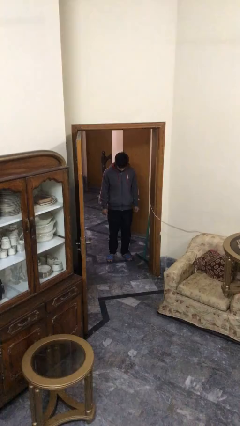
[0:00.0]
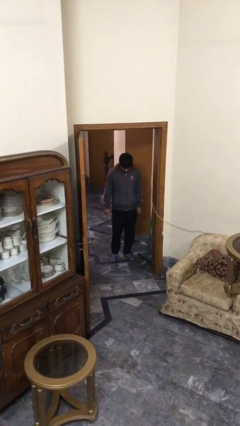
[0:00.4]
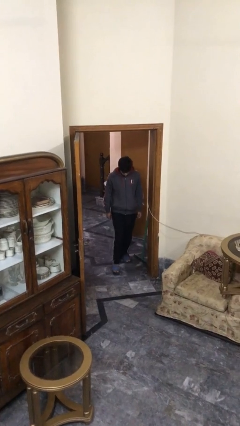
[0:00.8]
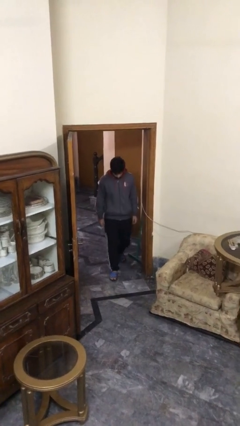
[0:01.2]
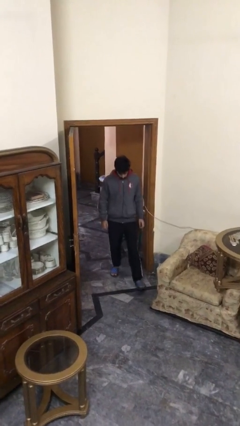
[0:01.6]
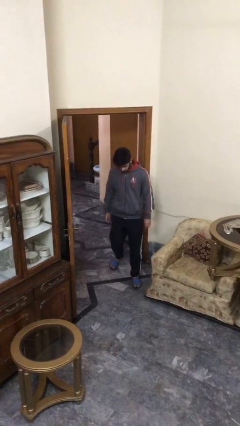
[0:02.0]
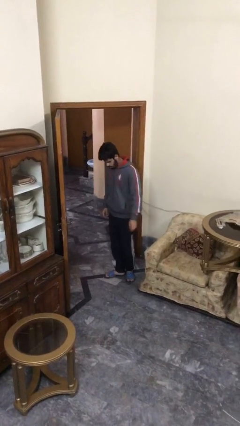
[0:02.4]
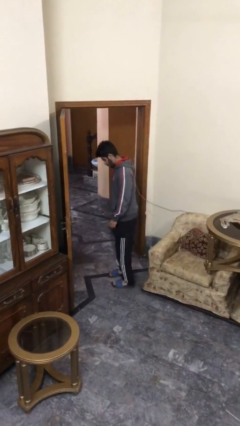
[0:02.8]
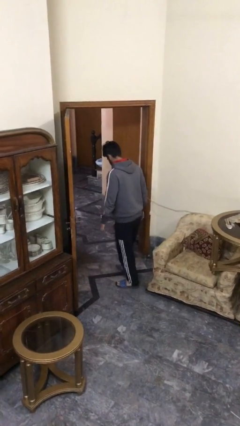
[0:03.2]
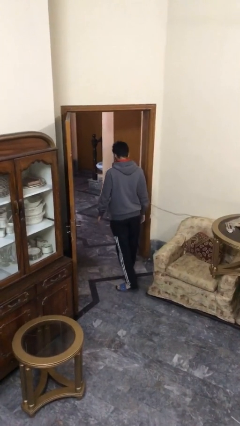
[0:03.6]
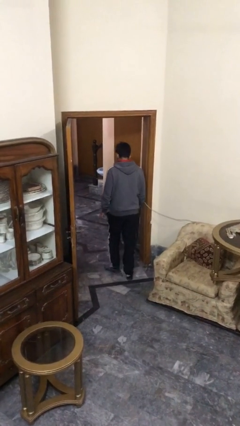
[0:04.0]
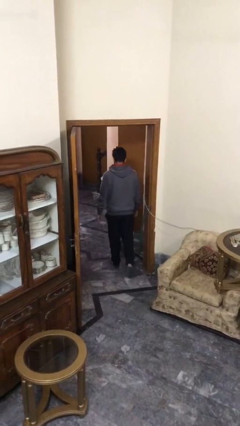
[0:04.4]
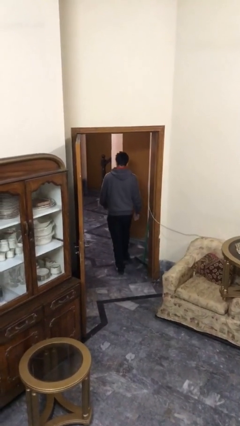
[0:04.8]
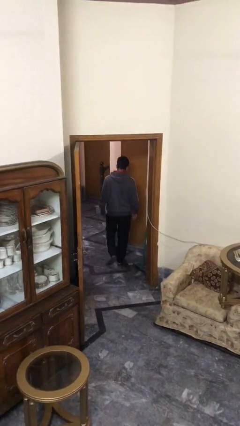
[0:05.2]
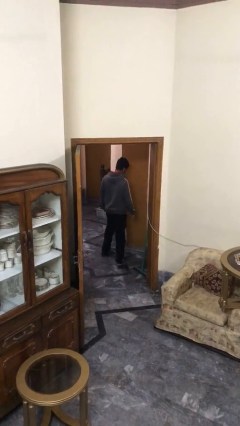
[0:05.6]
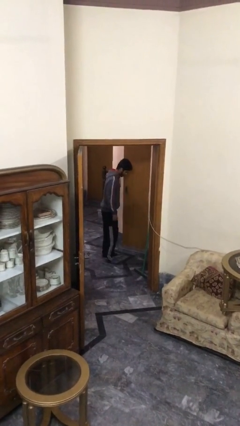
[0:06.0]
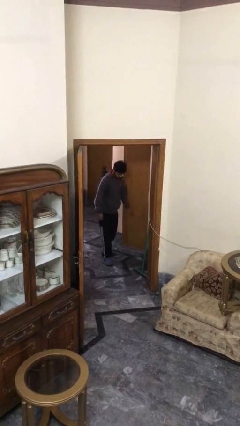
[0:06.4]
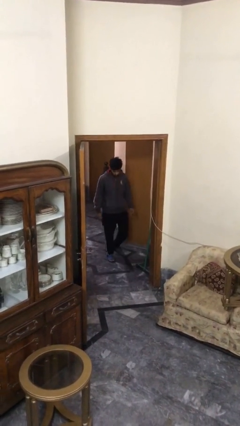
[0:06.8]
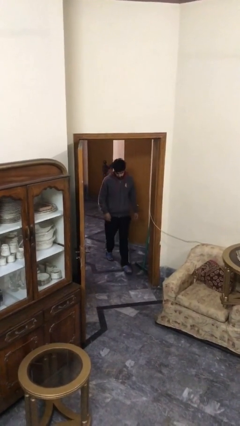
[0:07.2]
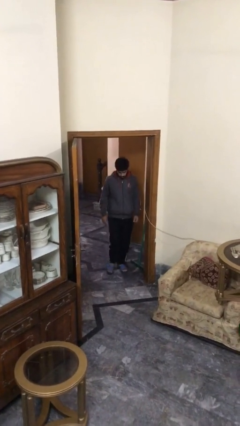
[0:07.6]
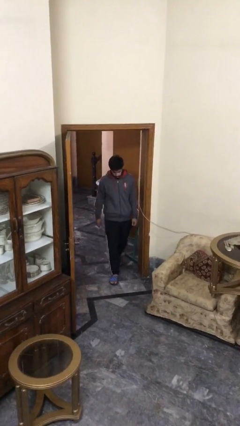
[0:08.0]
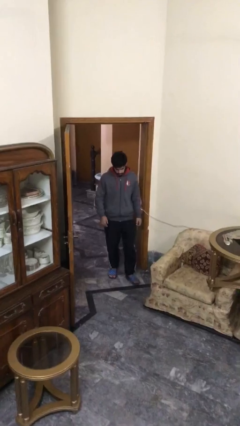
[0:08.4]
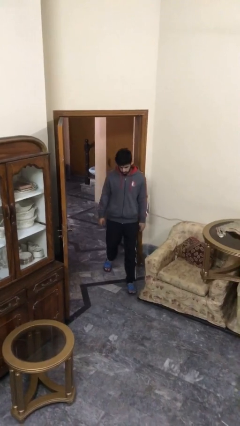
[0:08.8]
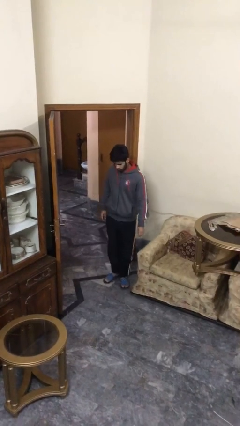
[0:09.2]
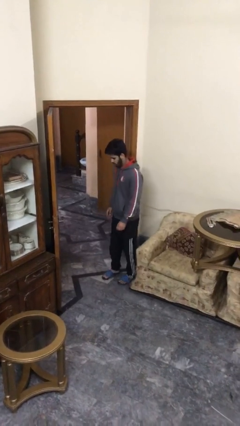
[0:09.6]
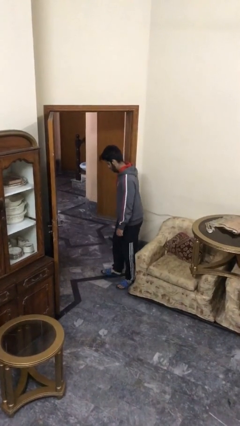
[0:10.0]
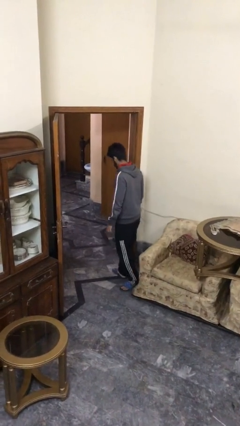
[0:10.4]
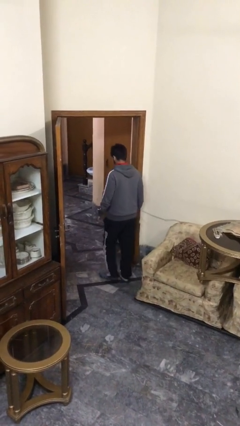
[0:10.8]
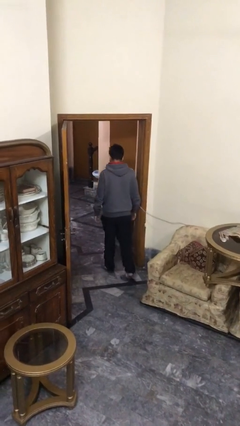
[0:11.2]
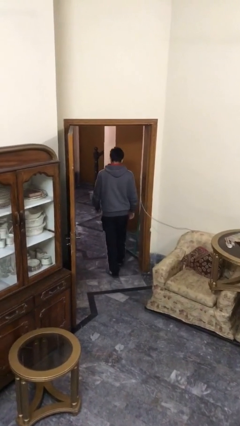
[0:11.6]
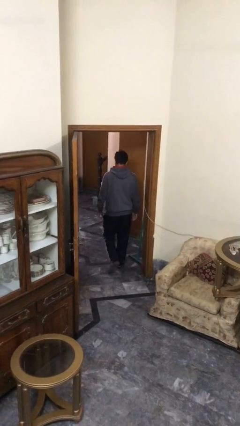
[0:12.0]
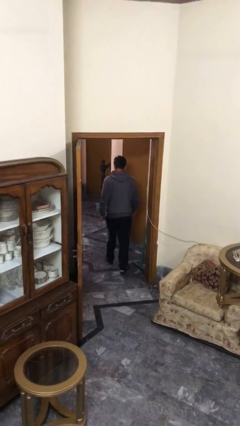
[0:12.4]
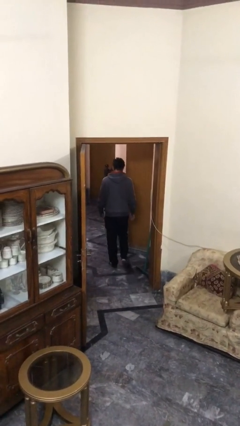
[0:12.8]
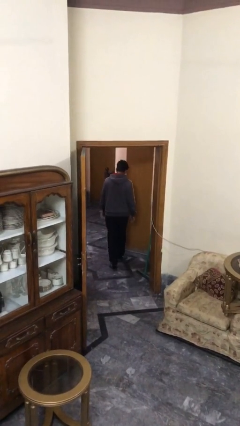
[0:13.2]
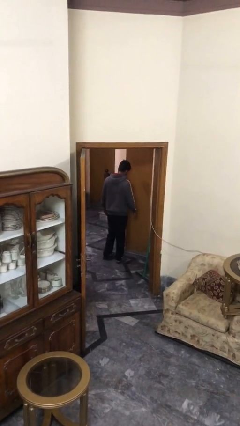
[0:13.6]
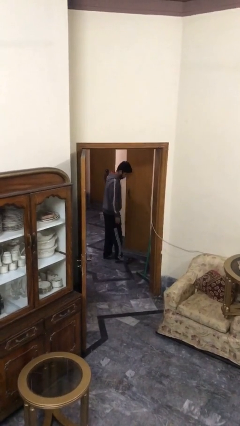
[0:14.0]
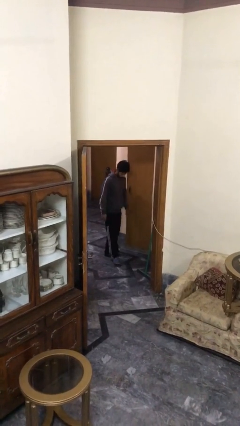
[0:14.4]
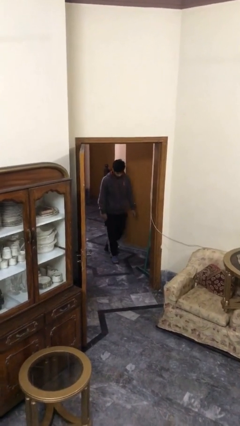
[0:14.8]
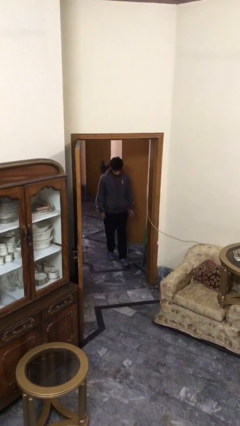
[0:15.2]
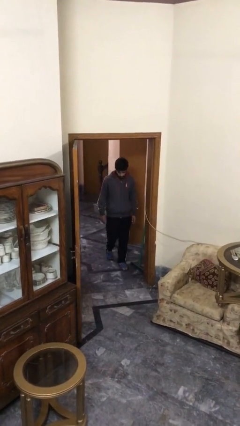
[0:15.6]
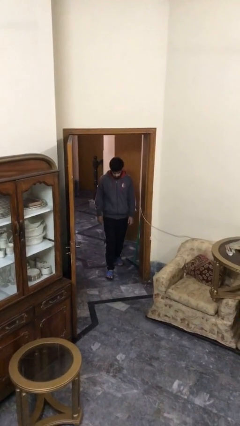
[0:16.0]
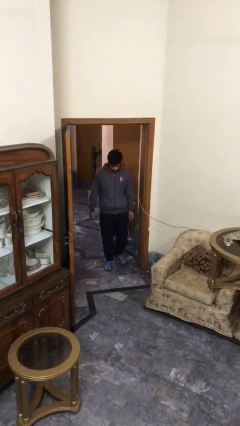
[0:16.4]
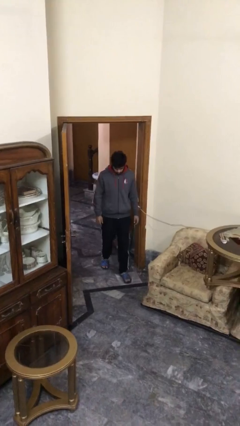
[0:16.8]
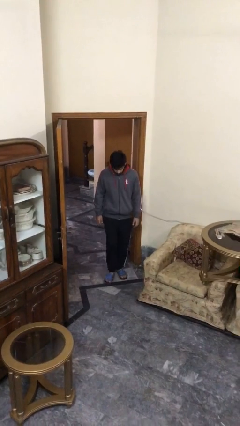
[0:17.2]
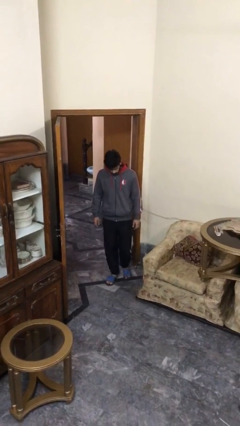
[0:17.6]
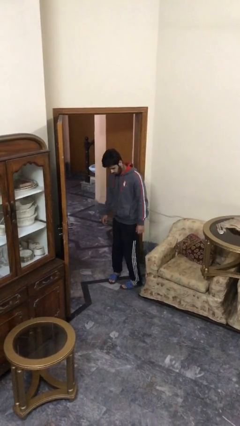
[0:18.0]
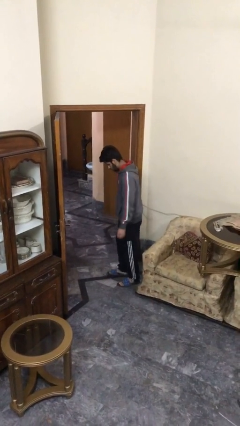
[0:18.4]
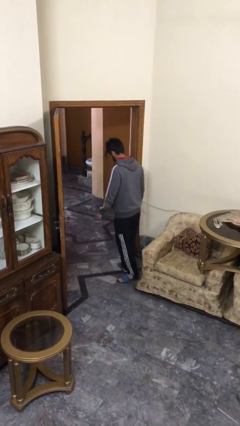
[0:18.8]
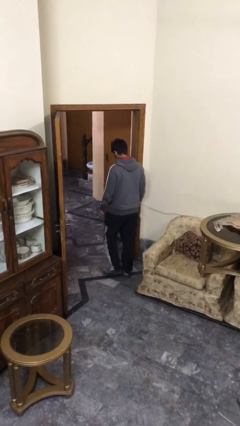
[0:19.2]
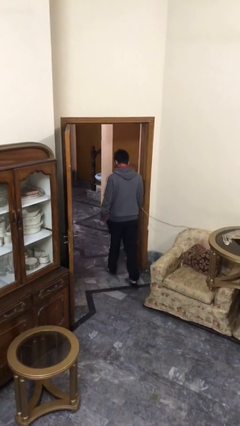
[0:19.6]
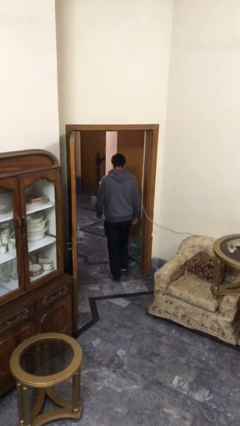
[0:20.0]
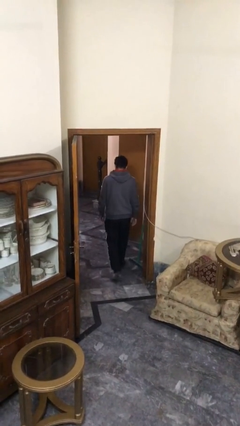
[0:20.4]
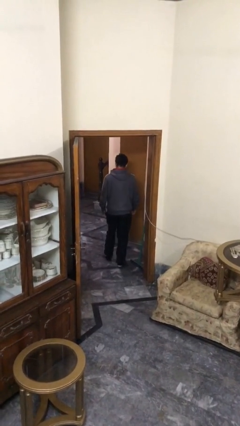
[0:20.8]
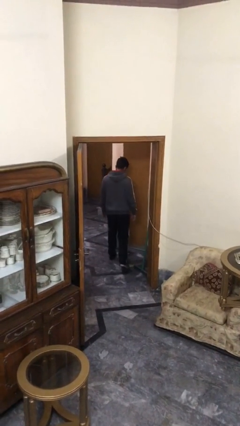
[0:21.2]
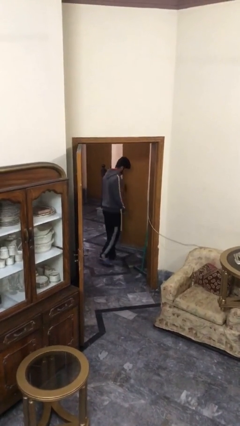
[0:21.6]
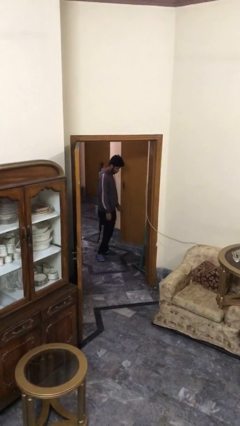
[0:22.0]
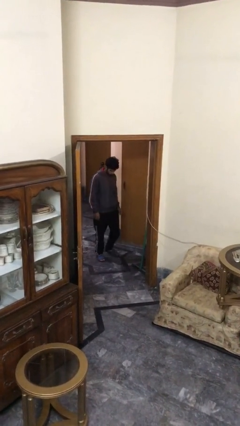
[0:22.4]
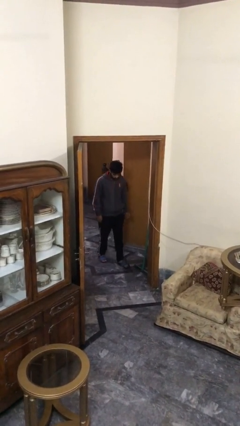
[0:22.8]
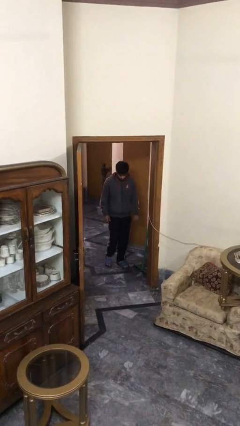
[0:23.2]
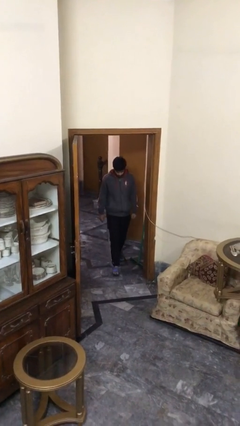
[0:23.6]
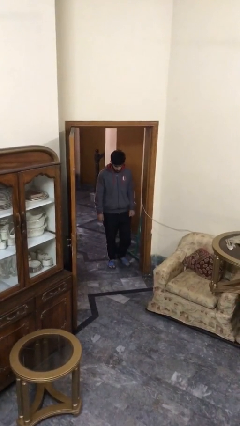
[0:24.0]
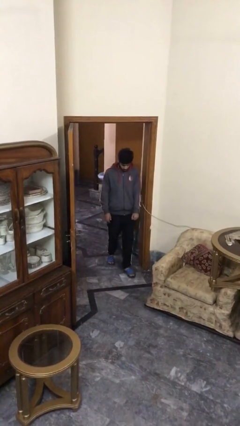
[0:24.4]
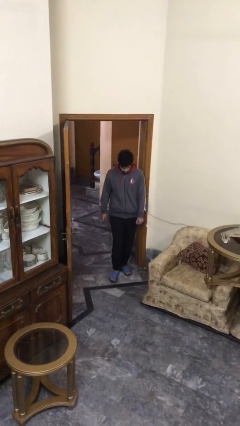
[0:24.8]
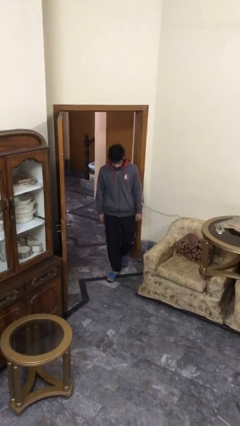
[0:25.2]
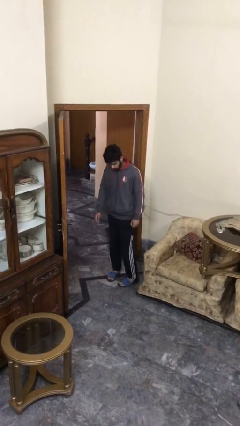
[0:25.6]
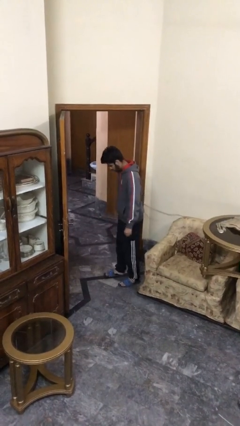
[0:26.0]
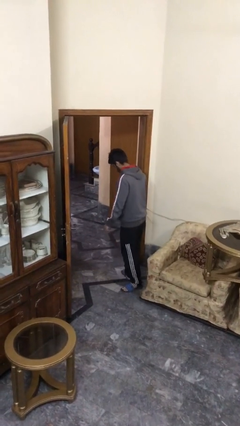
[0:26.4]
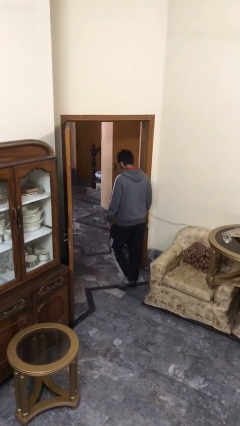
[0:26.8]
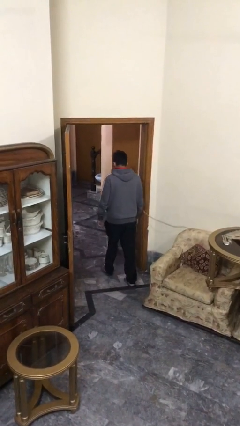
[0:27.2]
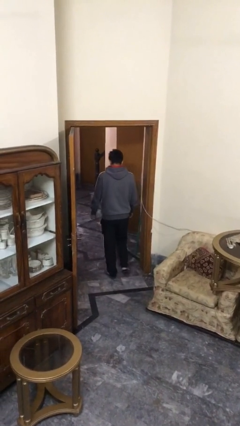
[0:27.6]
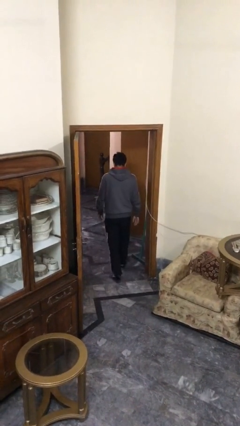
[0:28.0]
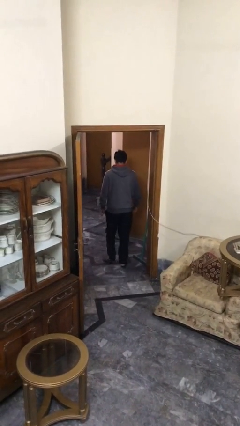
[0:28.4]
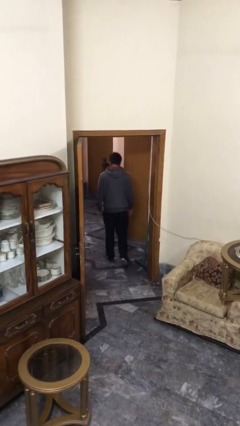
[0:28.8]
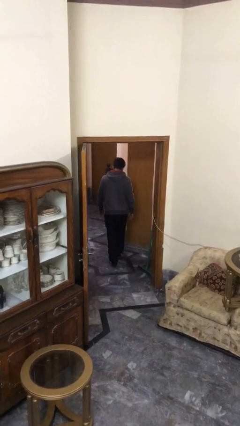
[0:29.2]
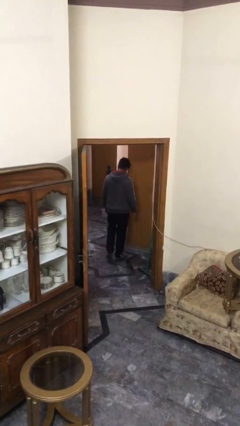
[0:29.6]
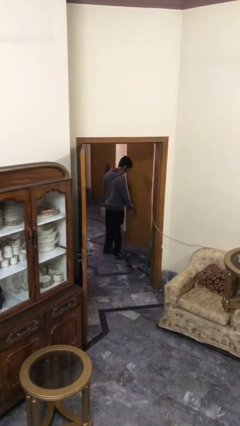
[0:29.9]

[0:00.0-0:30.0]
person walks

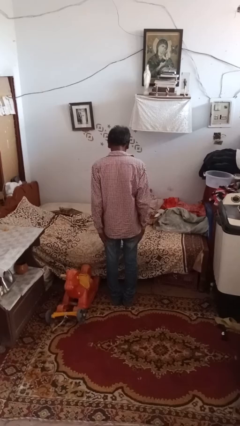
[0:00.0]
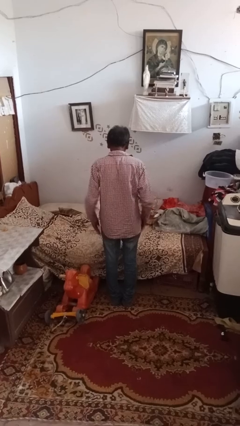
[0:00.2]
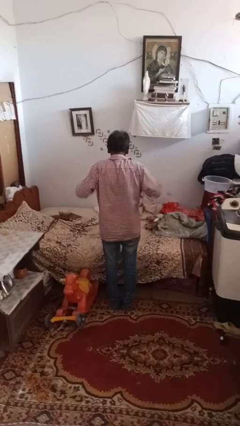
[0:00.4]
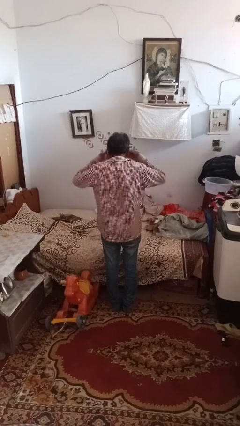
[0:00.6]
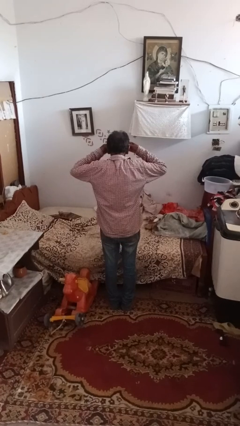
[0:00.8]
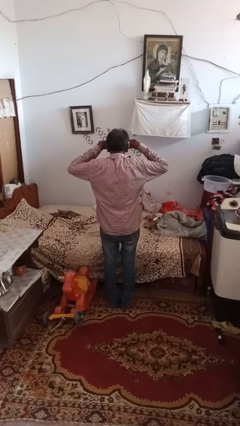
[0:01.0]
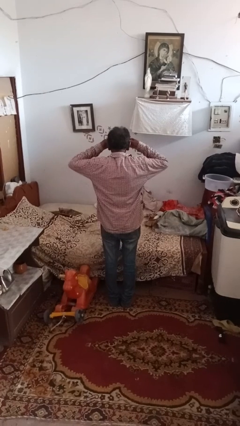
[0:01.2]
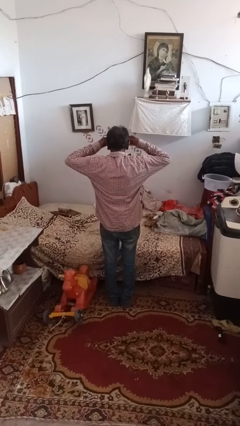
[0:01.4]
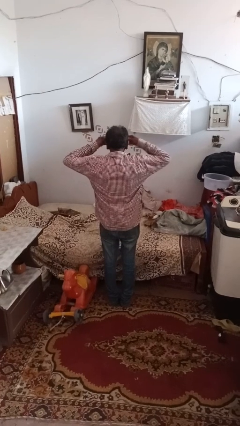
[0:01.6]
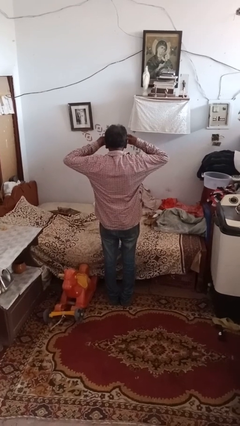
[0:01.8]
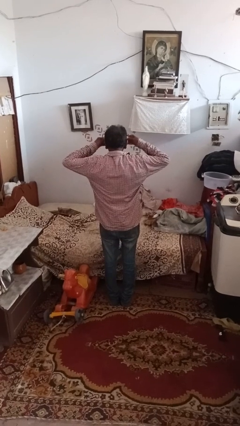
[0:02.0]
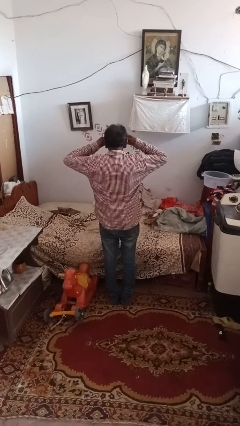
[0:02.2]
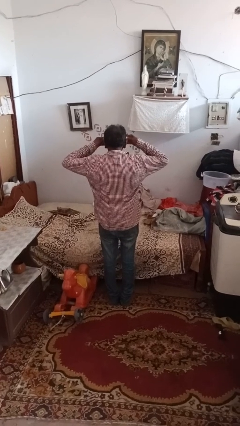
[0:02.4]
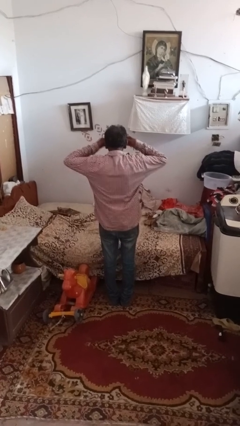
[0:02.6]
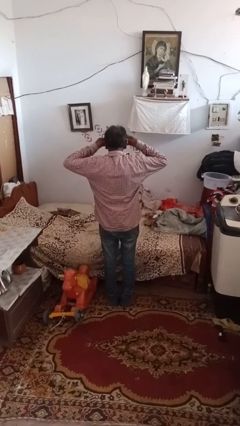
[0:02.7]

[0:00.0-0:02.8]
person rubs eyes

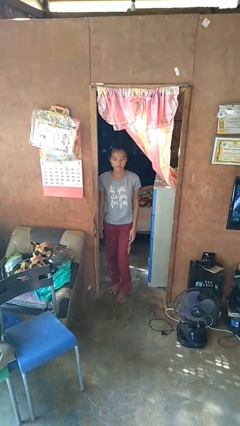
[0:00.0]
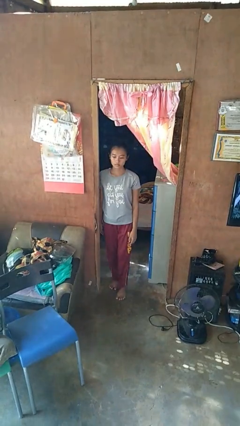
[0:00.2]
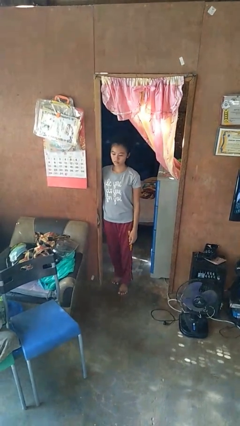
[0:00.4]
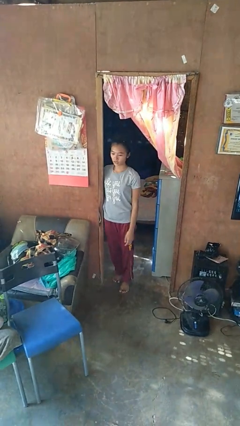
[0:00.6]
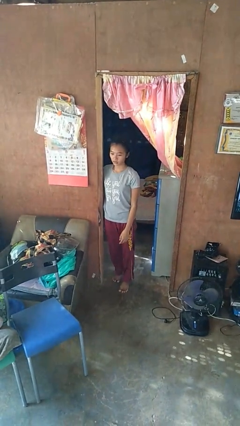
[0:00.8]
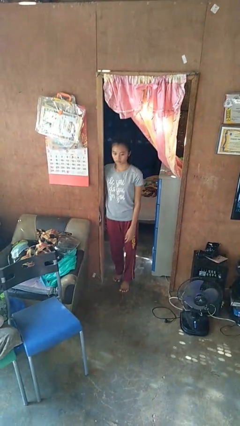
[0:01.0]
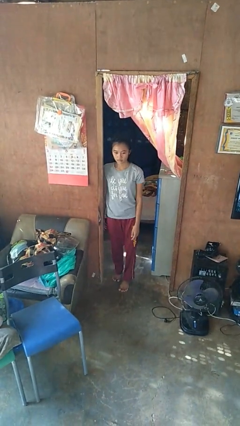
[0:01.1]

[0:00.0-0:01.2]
person bumps into wall
